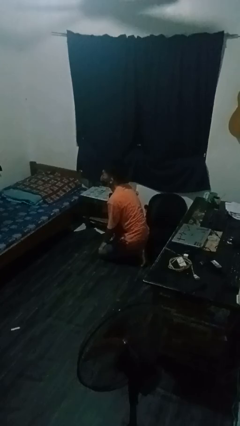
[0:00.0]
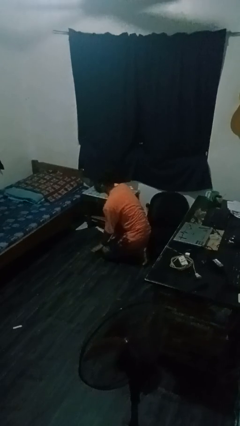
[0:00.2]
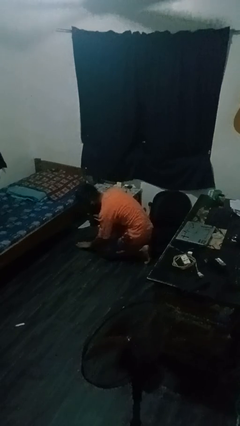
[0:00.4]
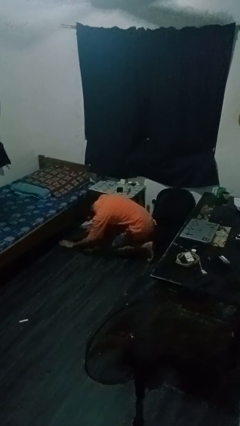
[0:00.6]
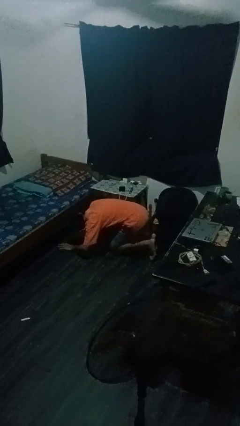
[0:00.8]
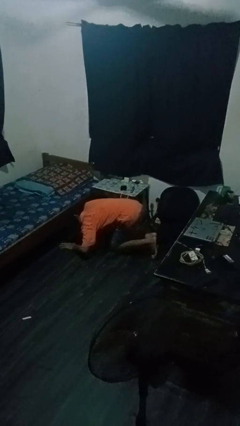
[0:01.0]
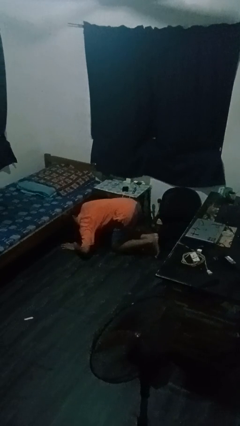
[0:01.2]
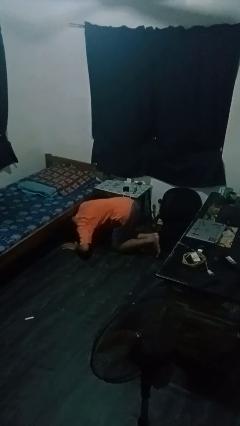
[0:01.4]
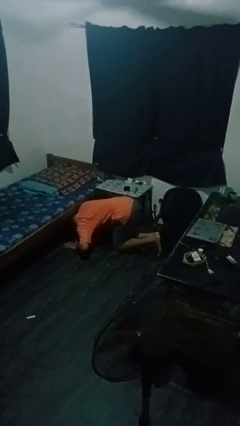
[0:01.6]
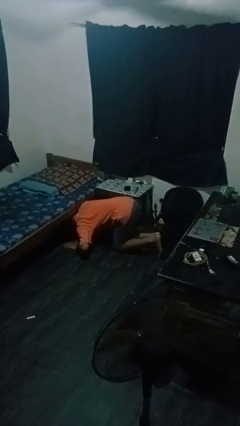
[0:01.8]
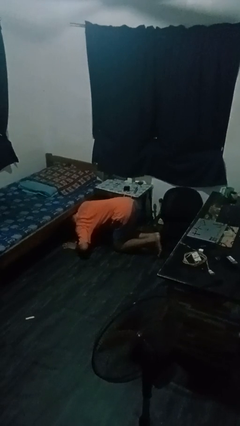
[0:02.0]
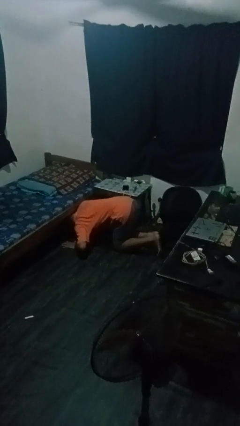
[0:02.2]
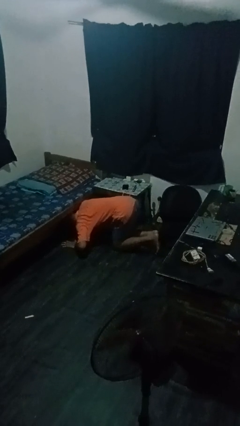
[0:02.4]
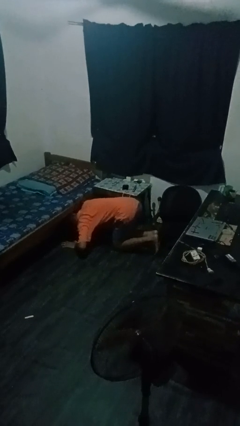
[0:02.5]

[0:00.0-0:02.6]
person searches under bed

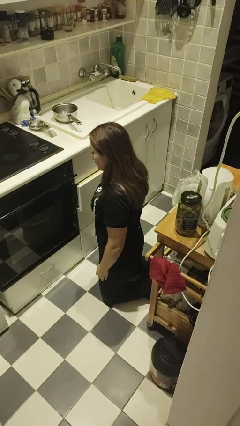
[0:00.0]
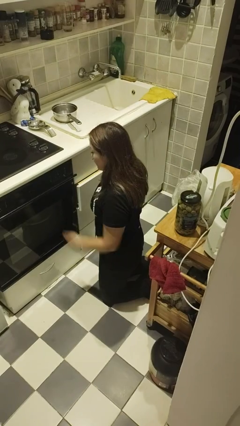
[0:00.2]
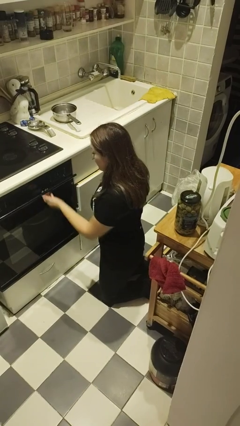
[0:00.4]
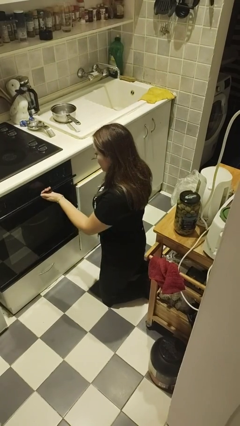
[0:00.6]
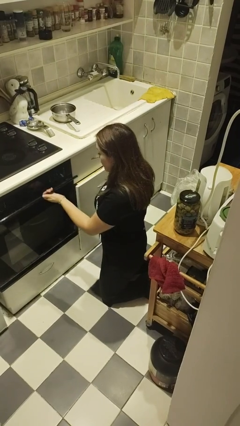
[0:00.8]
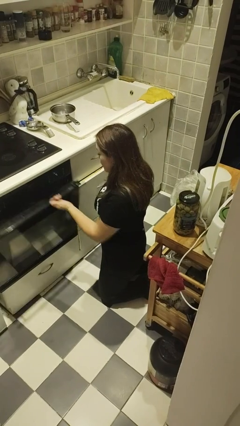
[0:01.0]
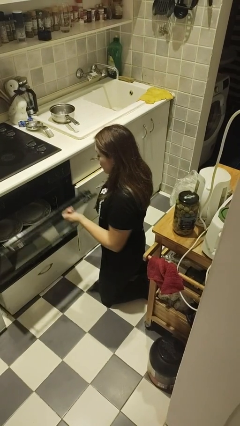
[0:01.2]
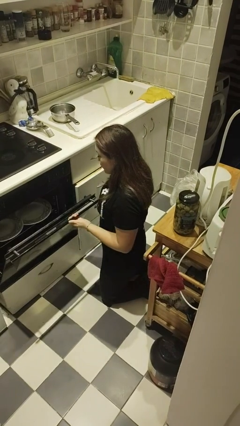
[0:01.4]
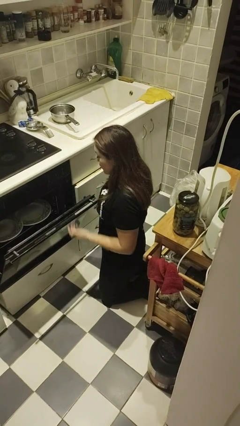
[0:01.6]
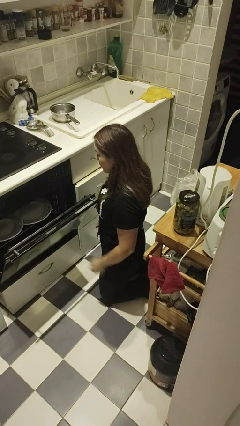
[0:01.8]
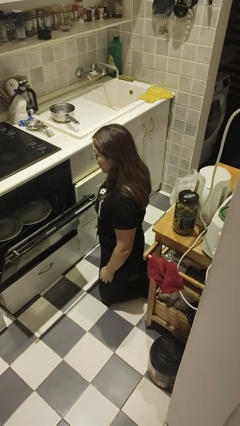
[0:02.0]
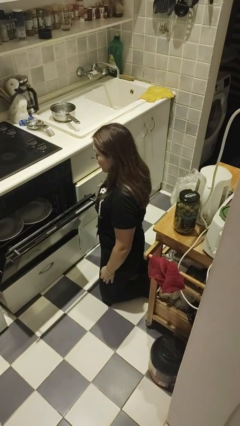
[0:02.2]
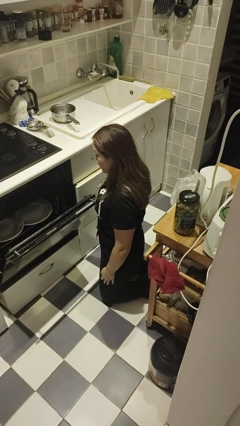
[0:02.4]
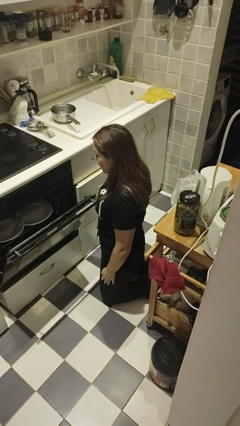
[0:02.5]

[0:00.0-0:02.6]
person opens oven door

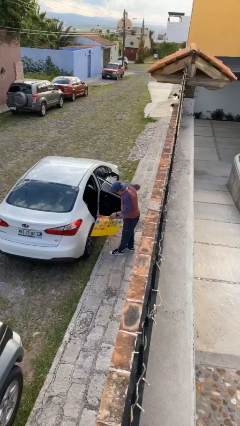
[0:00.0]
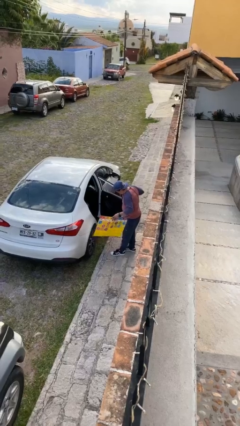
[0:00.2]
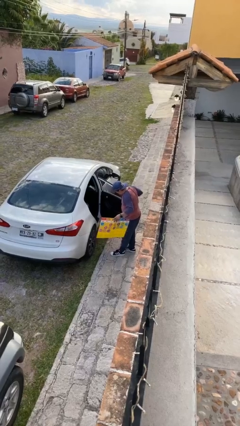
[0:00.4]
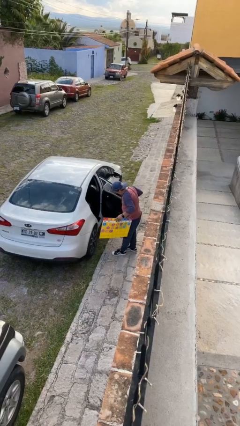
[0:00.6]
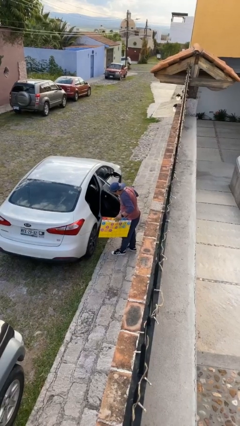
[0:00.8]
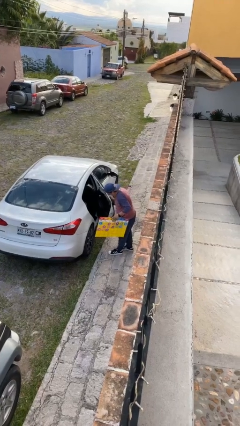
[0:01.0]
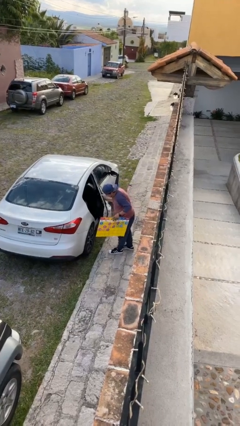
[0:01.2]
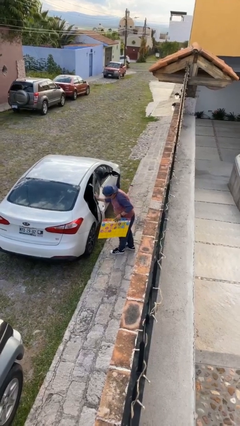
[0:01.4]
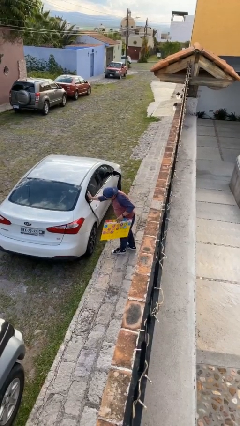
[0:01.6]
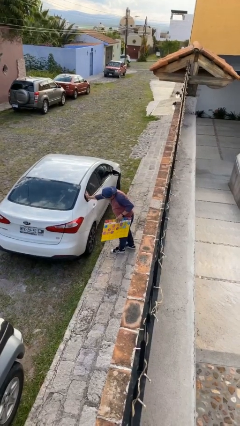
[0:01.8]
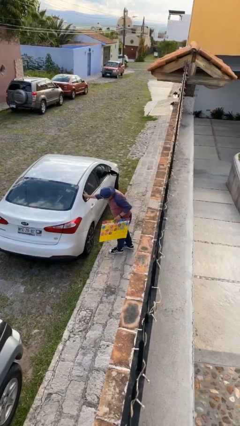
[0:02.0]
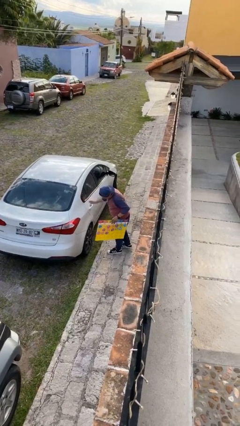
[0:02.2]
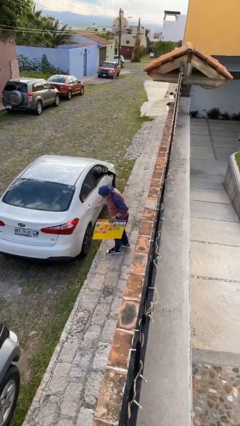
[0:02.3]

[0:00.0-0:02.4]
person closes car door

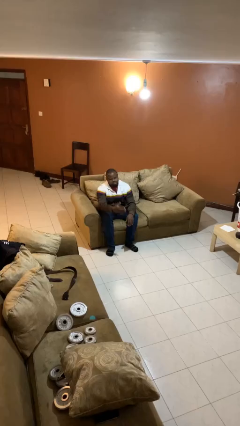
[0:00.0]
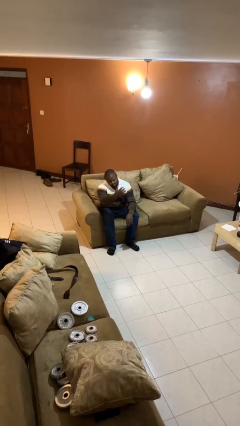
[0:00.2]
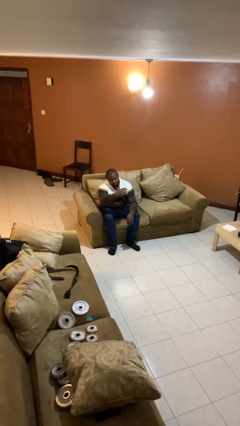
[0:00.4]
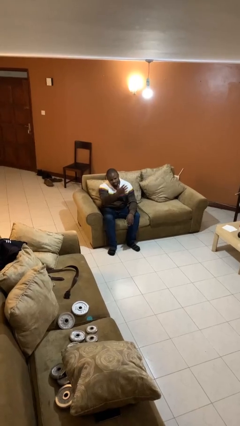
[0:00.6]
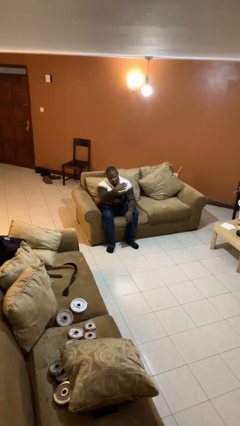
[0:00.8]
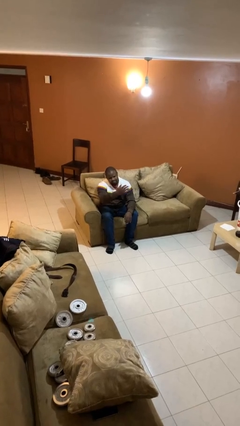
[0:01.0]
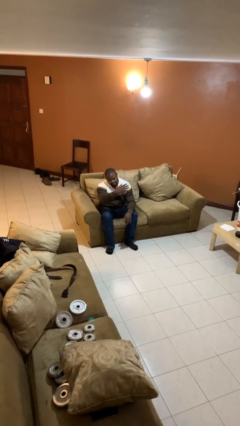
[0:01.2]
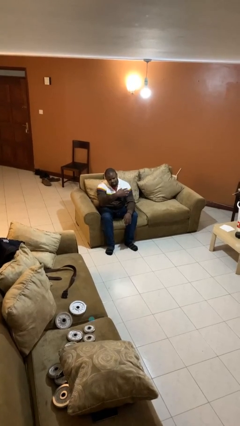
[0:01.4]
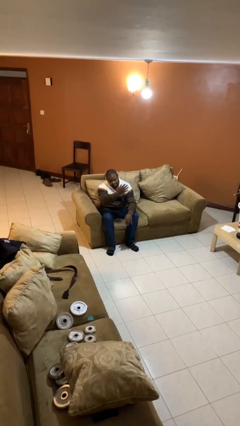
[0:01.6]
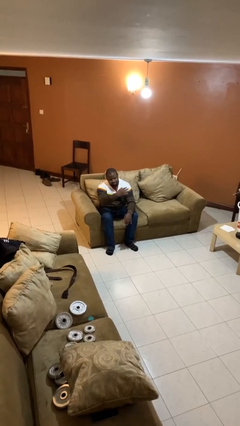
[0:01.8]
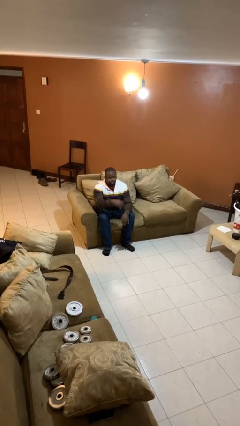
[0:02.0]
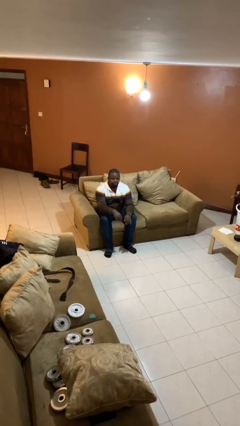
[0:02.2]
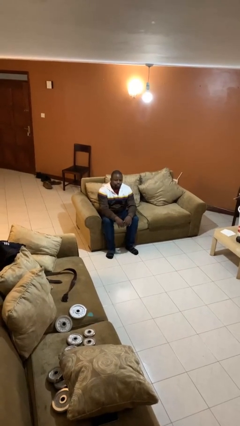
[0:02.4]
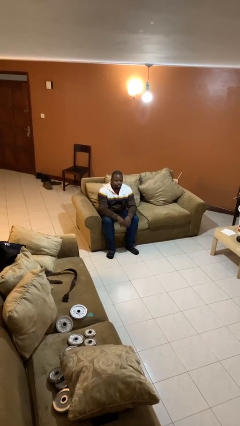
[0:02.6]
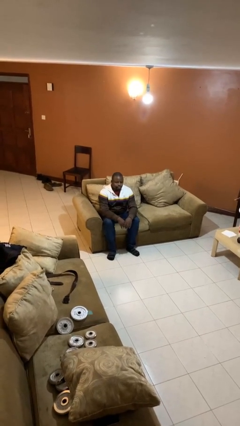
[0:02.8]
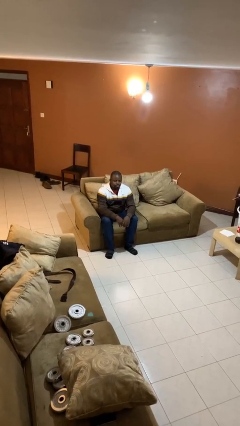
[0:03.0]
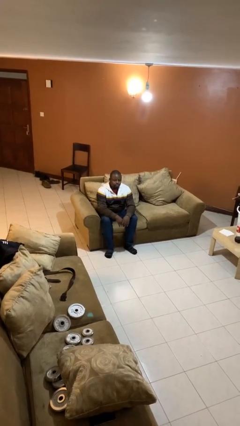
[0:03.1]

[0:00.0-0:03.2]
person gestures come here

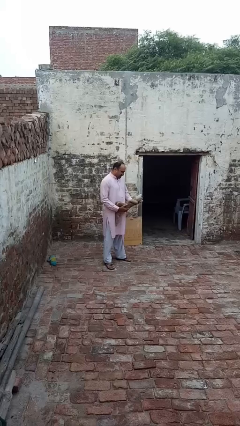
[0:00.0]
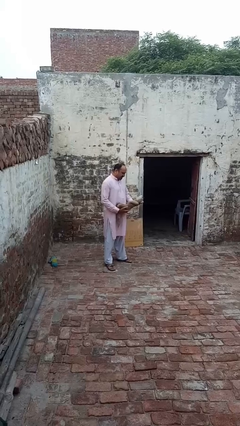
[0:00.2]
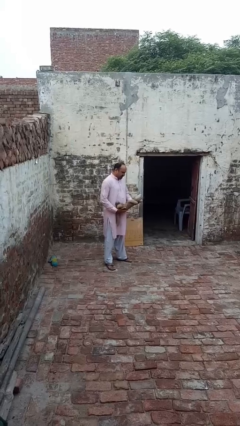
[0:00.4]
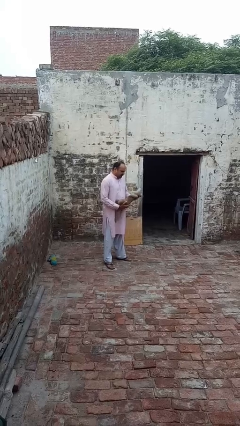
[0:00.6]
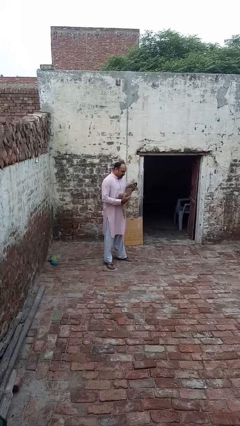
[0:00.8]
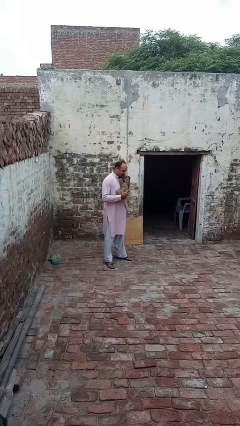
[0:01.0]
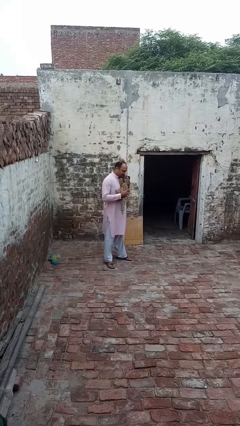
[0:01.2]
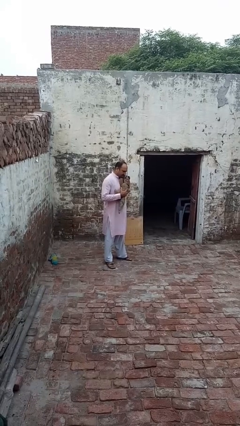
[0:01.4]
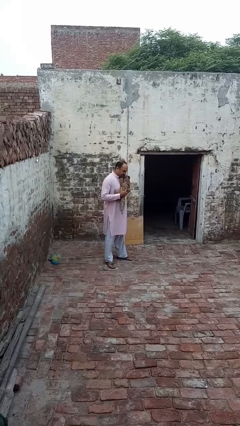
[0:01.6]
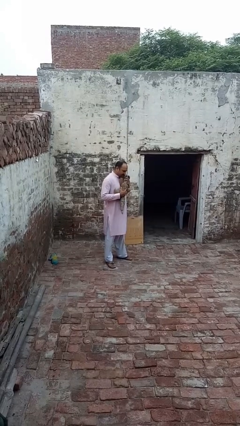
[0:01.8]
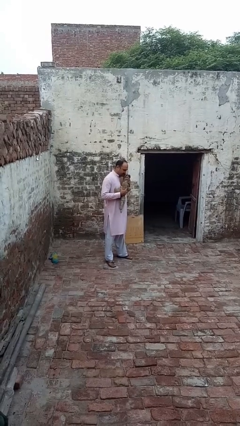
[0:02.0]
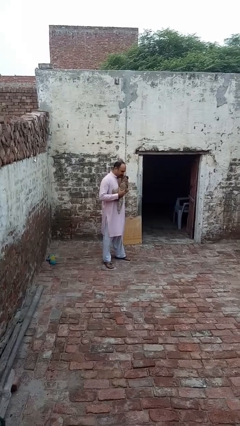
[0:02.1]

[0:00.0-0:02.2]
person hugs stuffed animal

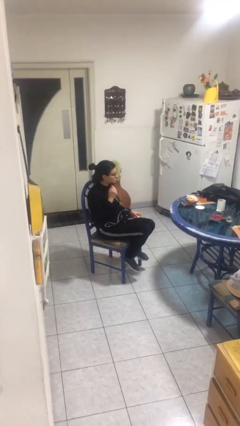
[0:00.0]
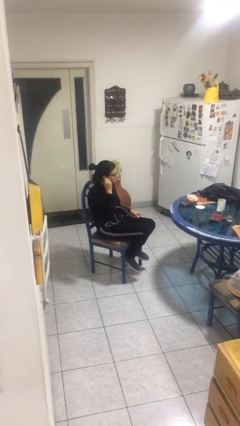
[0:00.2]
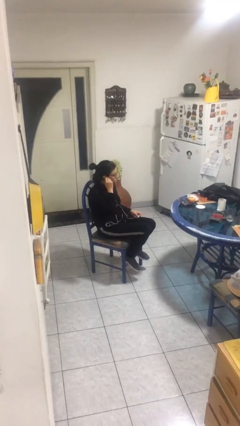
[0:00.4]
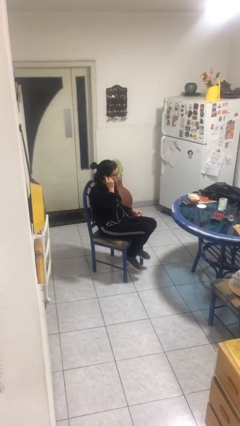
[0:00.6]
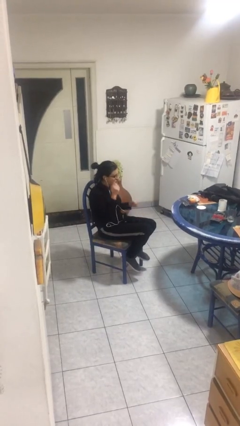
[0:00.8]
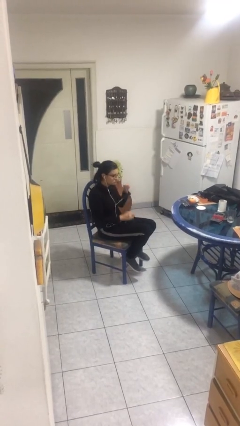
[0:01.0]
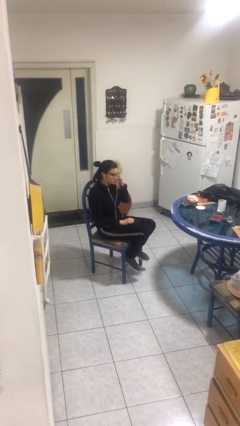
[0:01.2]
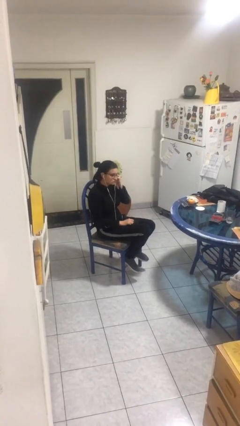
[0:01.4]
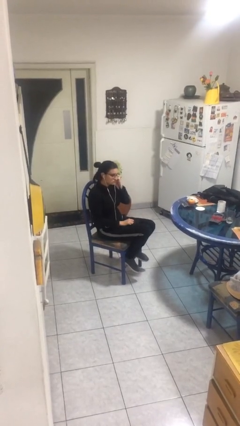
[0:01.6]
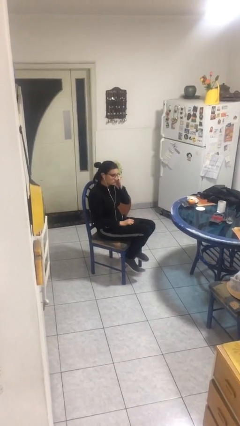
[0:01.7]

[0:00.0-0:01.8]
person puts on headphones

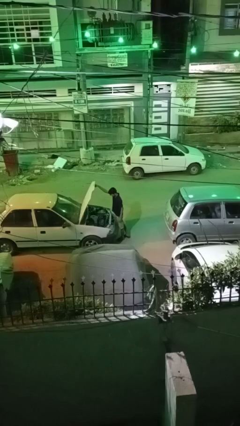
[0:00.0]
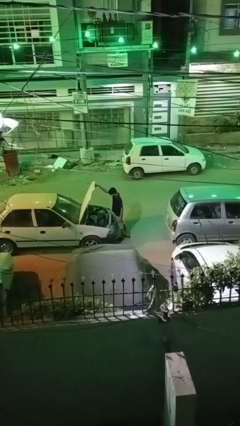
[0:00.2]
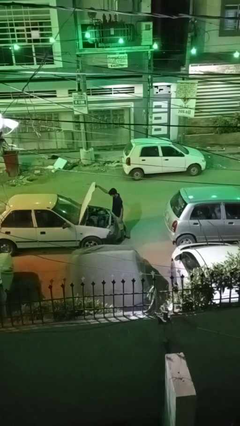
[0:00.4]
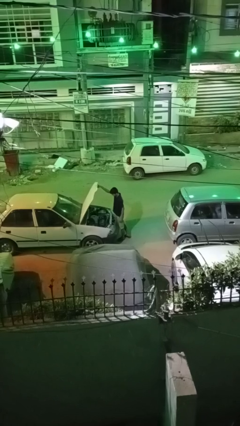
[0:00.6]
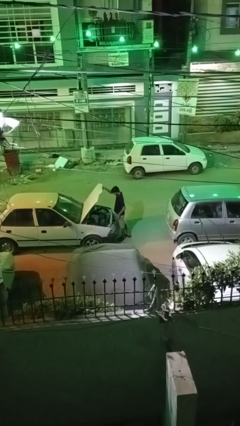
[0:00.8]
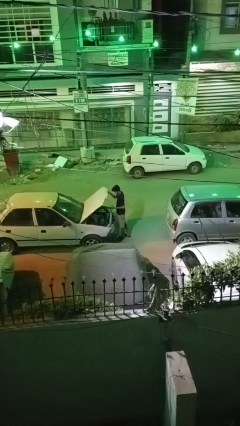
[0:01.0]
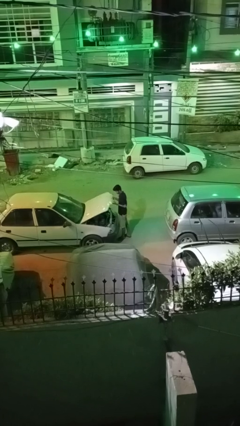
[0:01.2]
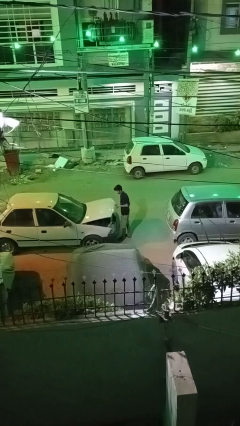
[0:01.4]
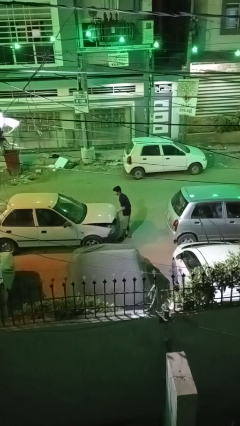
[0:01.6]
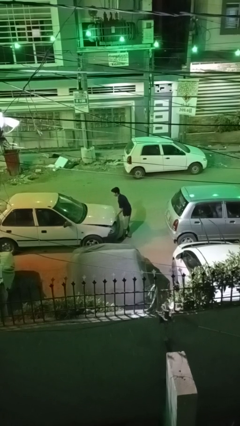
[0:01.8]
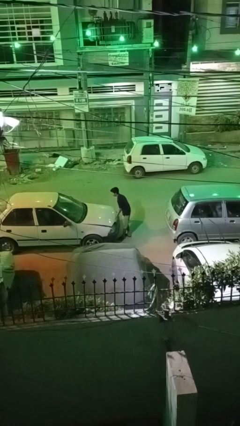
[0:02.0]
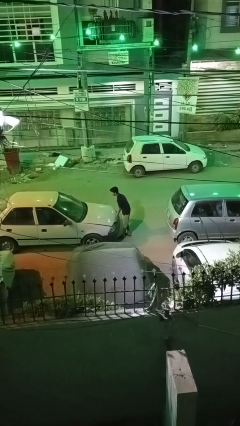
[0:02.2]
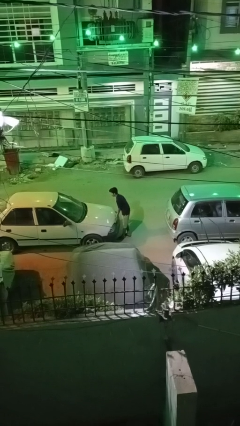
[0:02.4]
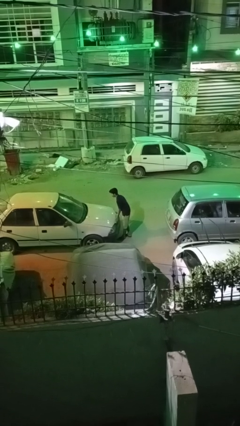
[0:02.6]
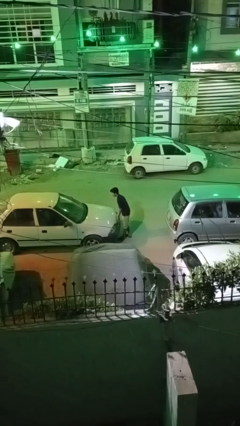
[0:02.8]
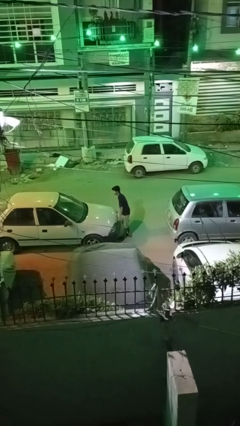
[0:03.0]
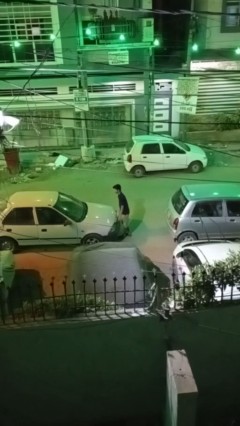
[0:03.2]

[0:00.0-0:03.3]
person closes car hood
